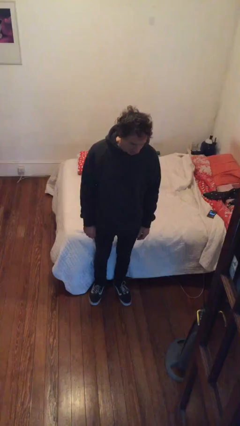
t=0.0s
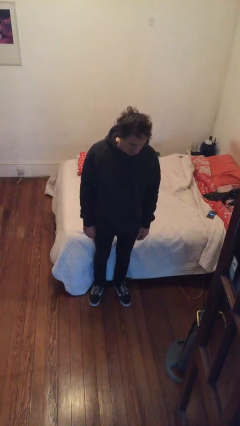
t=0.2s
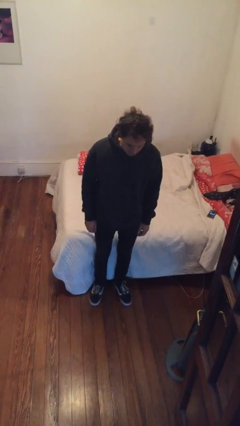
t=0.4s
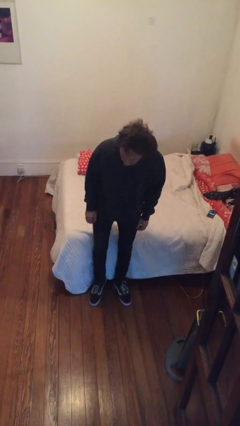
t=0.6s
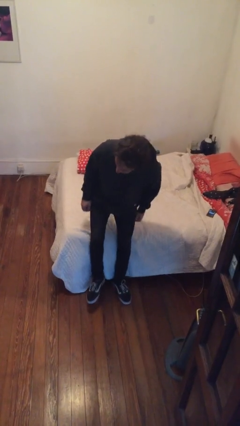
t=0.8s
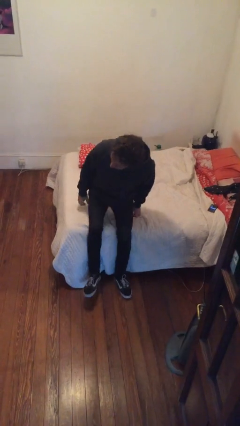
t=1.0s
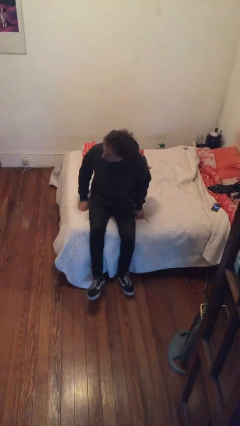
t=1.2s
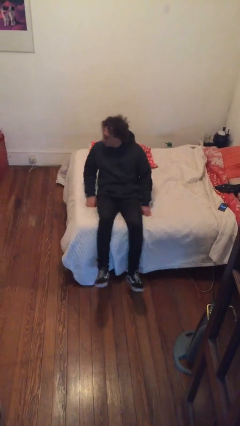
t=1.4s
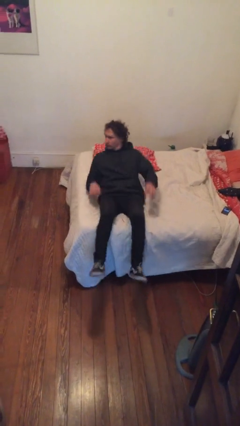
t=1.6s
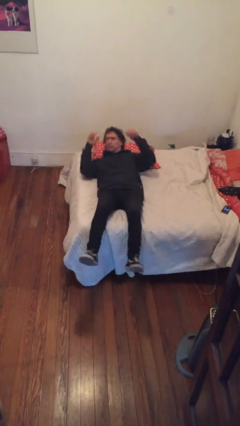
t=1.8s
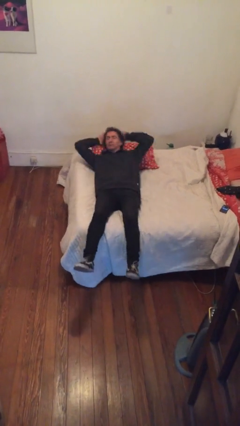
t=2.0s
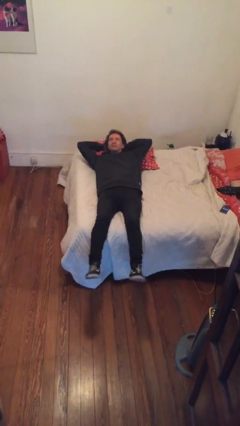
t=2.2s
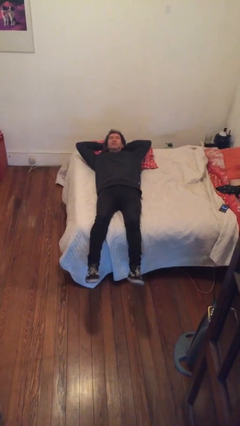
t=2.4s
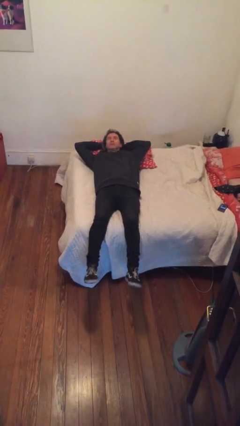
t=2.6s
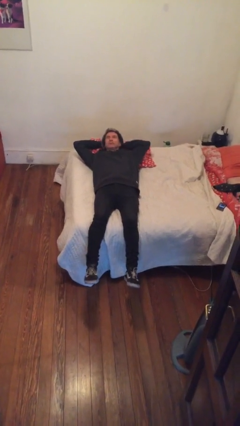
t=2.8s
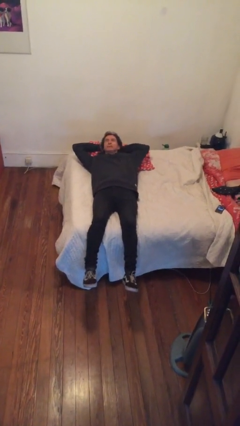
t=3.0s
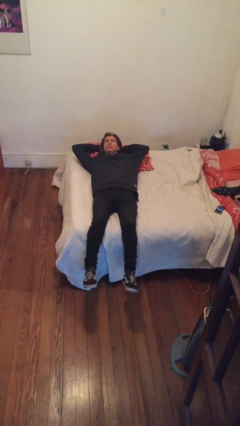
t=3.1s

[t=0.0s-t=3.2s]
person lies down on bed

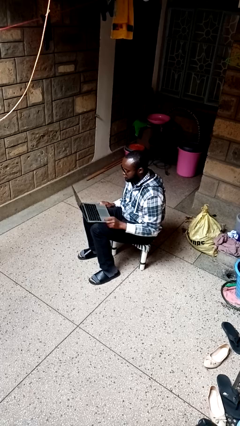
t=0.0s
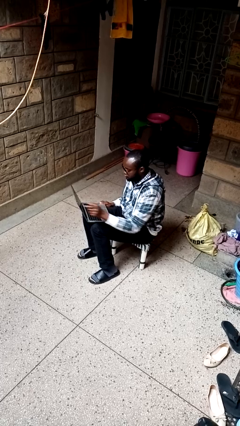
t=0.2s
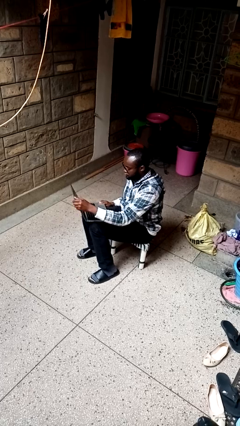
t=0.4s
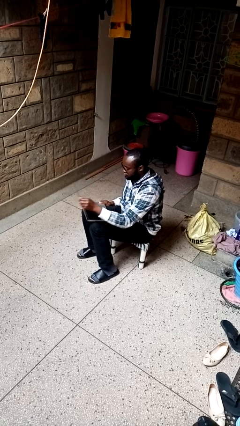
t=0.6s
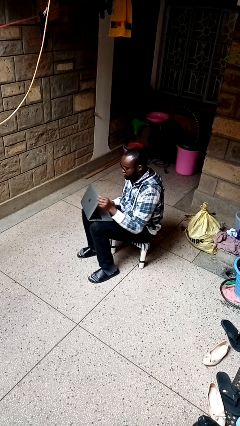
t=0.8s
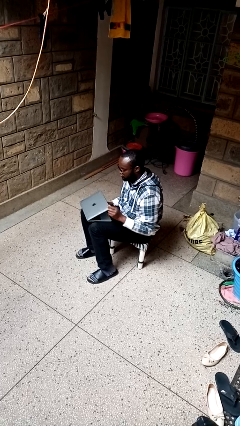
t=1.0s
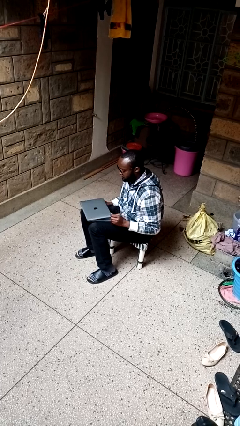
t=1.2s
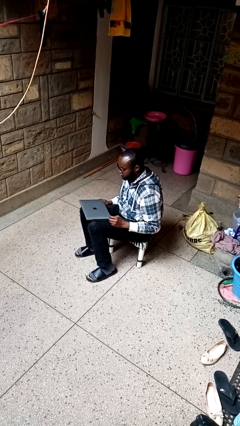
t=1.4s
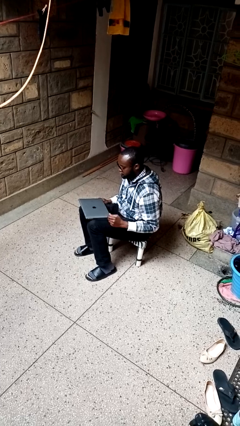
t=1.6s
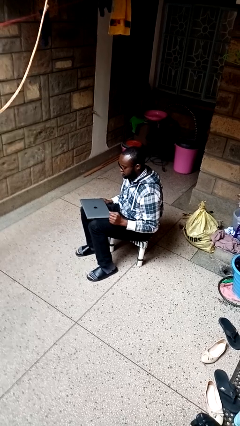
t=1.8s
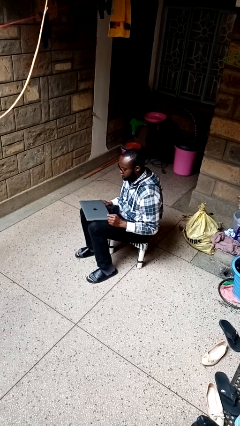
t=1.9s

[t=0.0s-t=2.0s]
person closes laptop

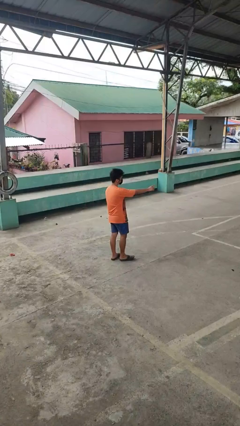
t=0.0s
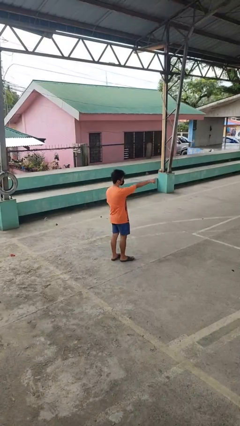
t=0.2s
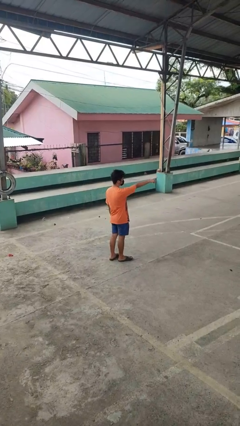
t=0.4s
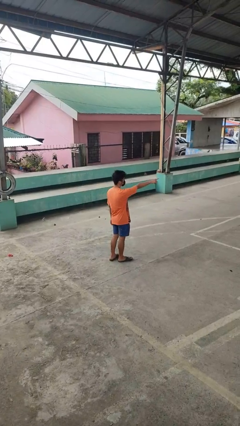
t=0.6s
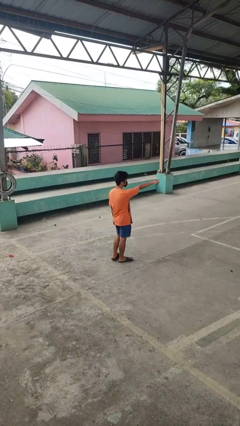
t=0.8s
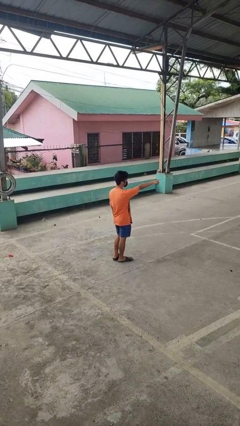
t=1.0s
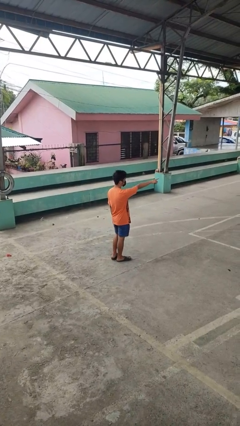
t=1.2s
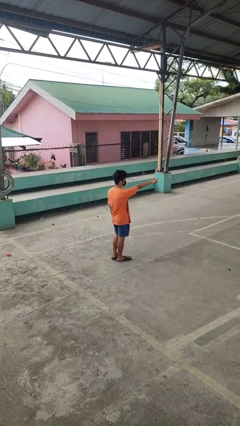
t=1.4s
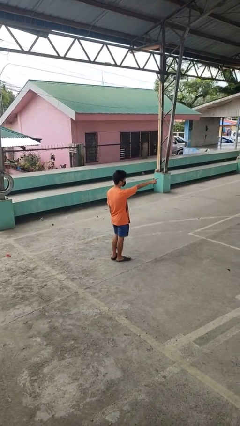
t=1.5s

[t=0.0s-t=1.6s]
person points at person

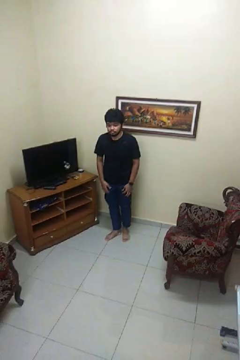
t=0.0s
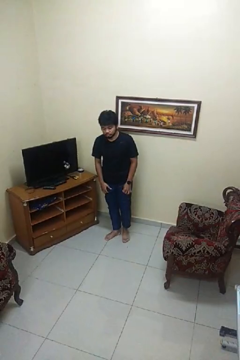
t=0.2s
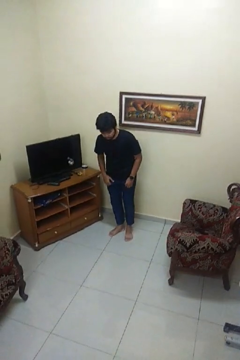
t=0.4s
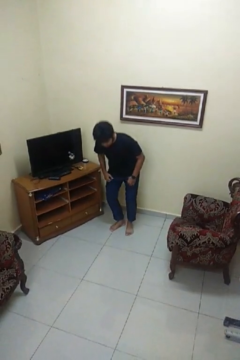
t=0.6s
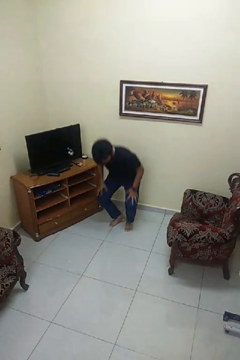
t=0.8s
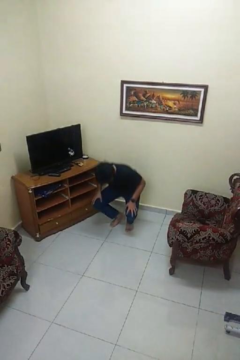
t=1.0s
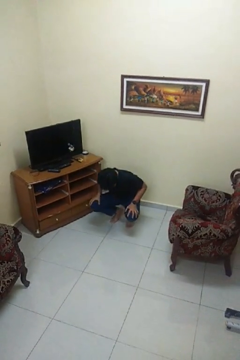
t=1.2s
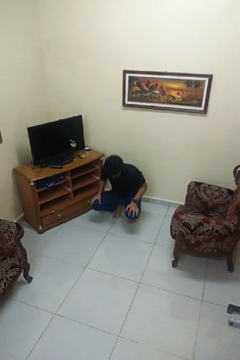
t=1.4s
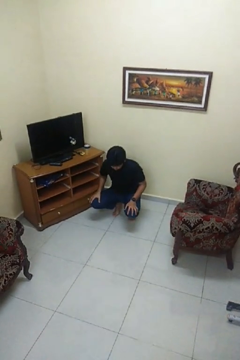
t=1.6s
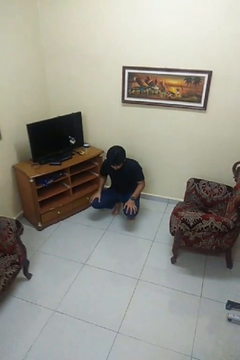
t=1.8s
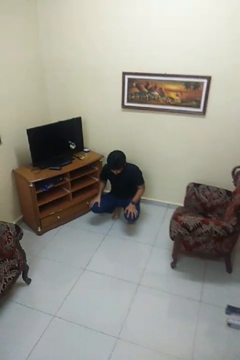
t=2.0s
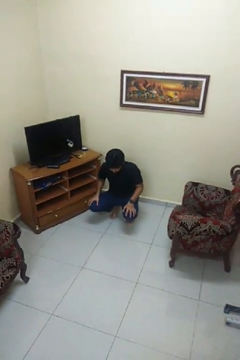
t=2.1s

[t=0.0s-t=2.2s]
person squats

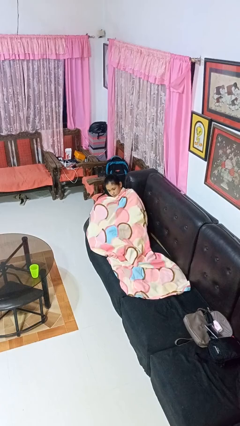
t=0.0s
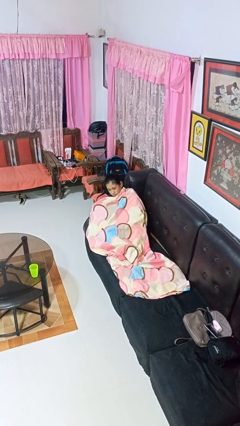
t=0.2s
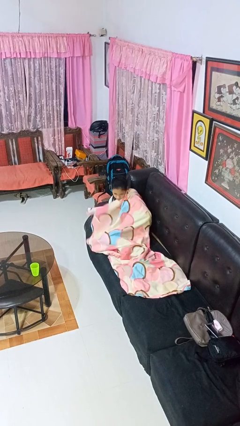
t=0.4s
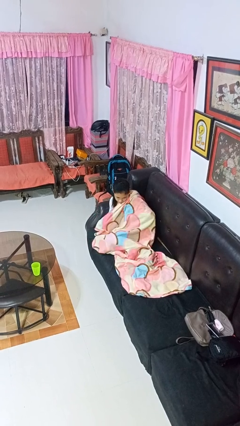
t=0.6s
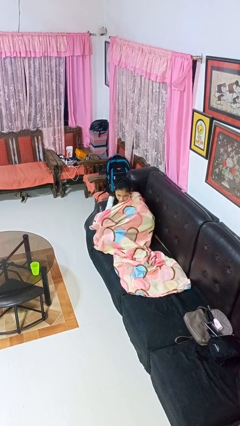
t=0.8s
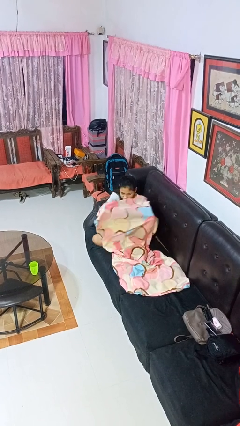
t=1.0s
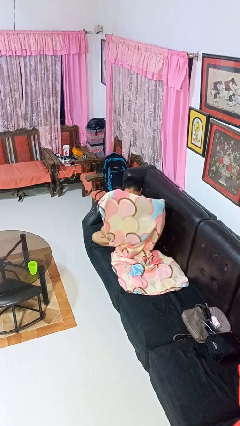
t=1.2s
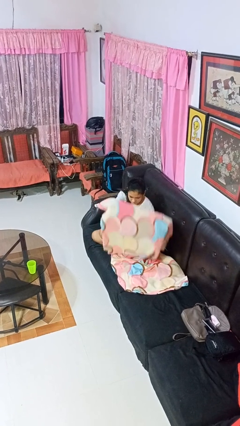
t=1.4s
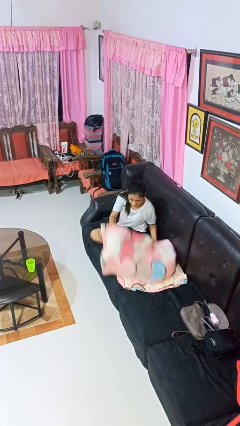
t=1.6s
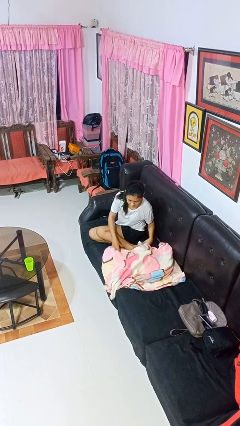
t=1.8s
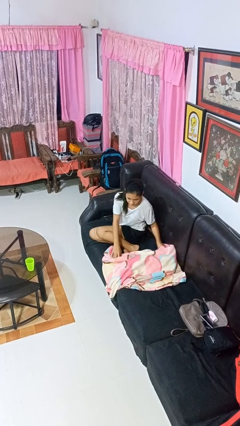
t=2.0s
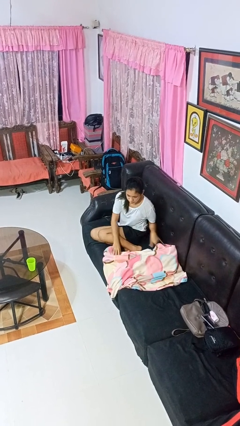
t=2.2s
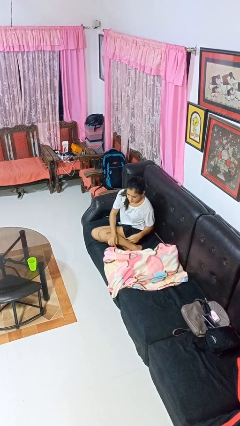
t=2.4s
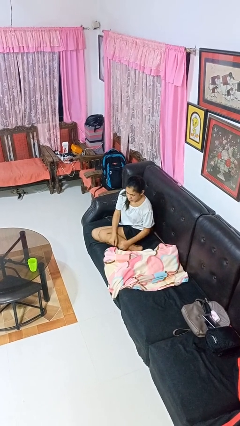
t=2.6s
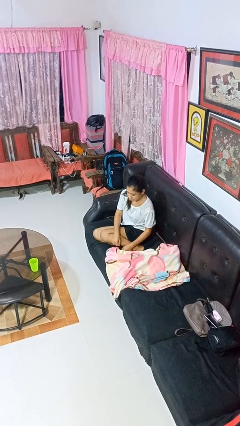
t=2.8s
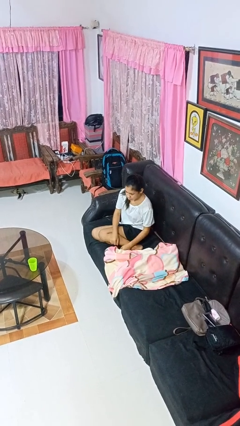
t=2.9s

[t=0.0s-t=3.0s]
person uncovers with blanket

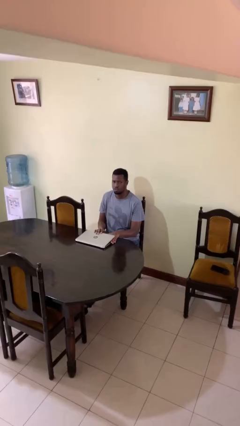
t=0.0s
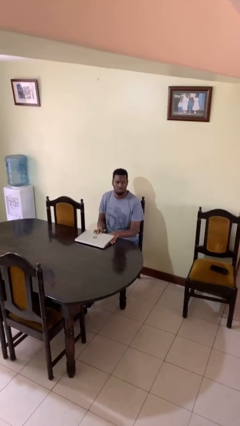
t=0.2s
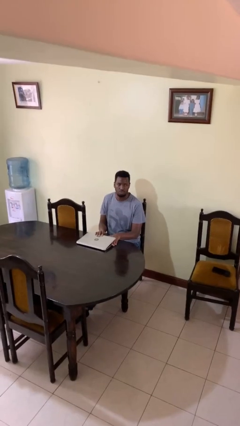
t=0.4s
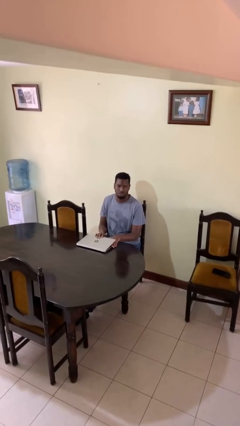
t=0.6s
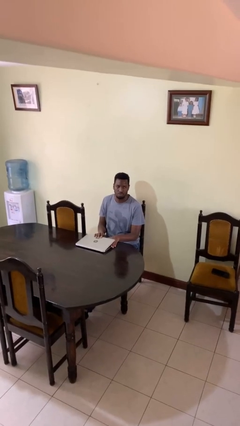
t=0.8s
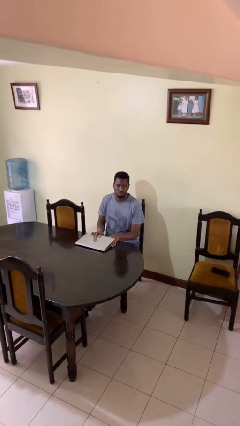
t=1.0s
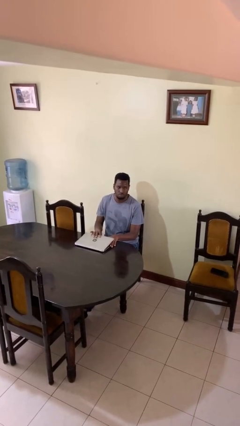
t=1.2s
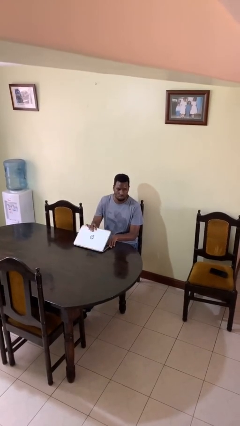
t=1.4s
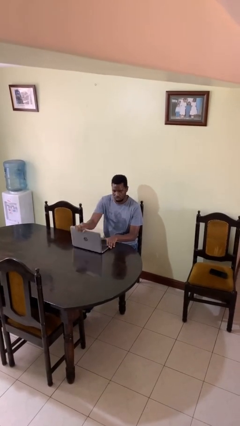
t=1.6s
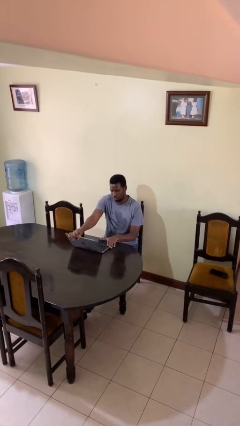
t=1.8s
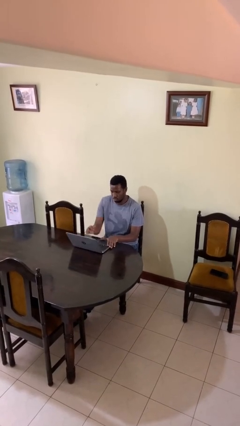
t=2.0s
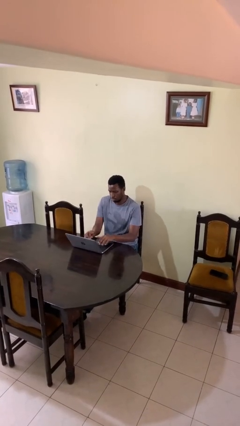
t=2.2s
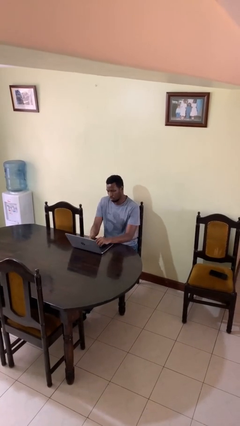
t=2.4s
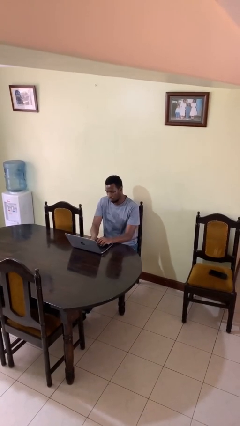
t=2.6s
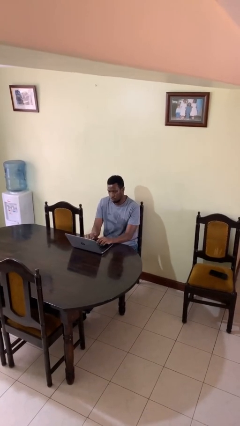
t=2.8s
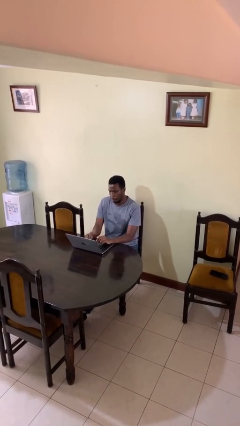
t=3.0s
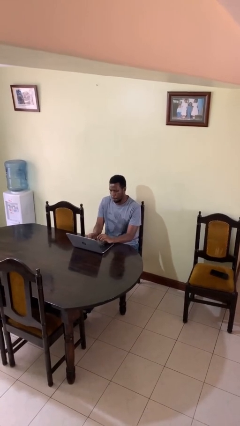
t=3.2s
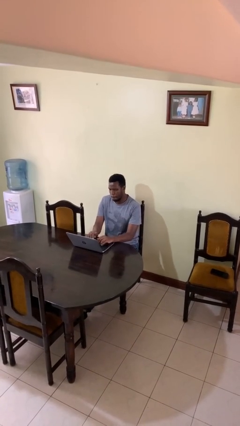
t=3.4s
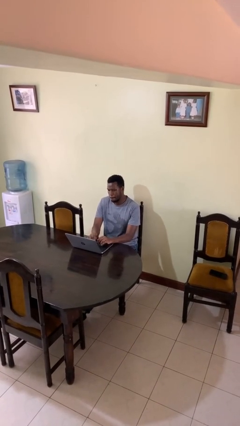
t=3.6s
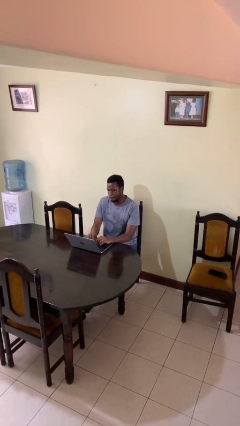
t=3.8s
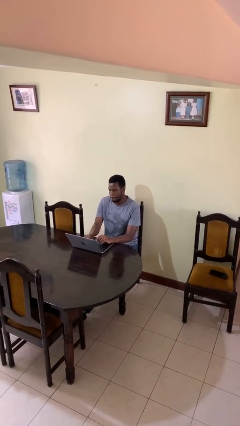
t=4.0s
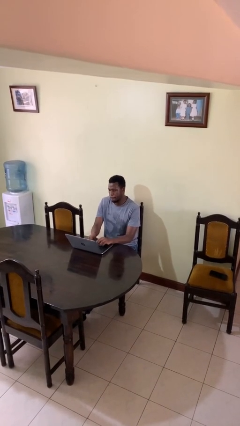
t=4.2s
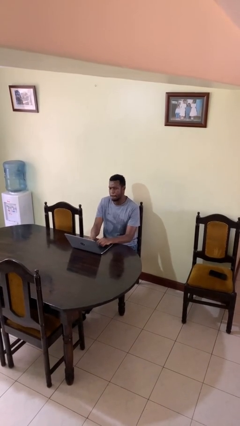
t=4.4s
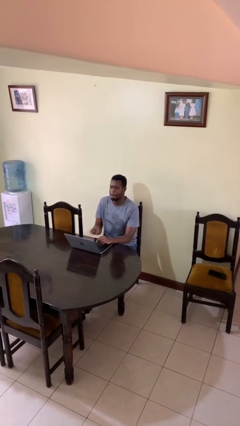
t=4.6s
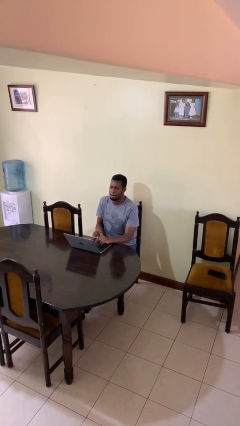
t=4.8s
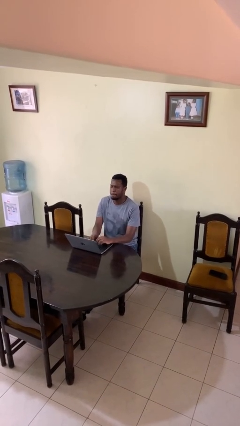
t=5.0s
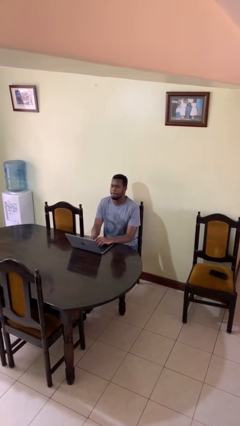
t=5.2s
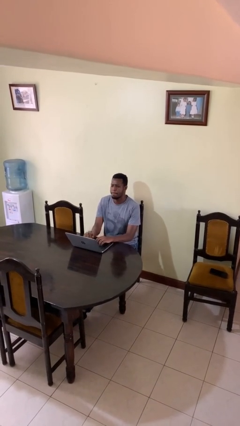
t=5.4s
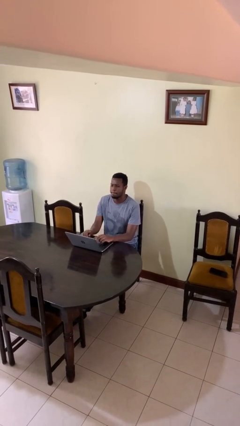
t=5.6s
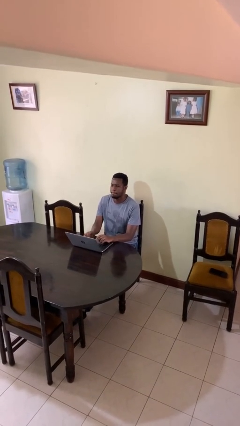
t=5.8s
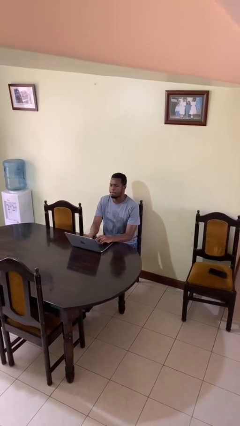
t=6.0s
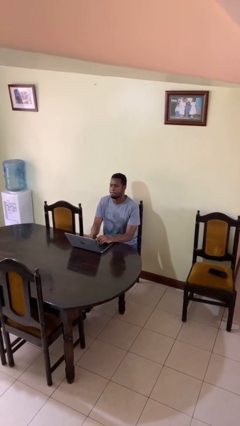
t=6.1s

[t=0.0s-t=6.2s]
person interacts with laptop
